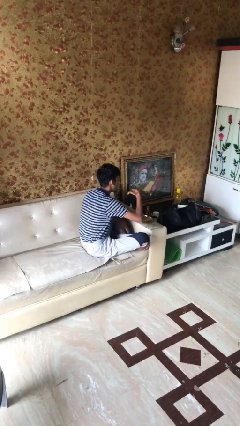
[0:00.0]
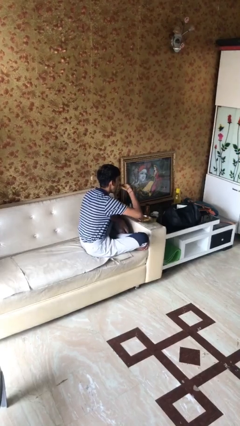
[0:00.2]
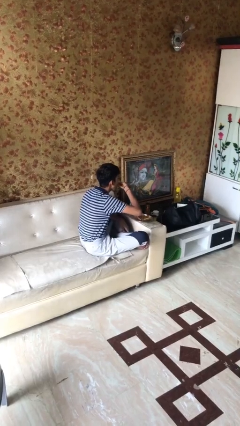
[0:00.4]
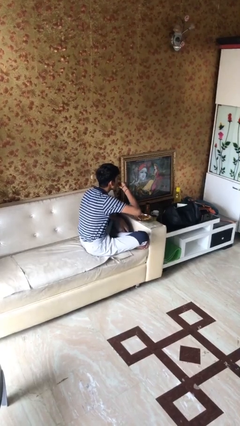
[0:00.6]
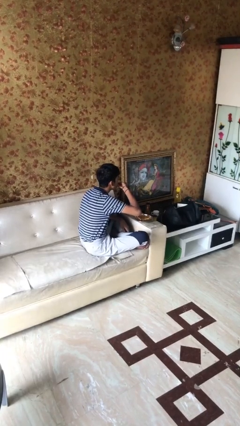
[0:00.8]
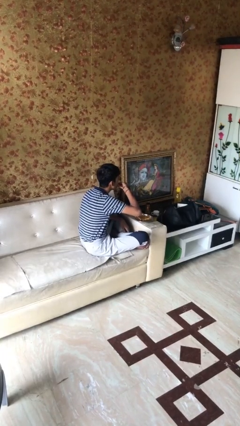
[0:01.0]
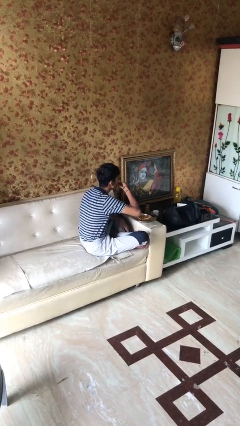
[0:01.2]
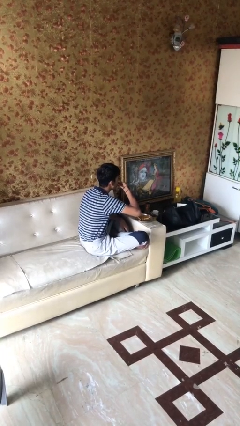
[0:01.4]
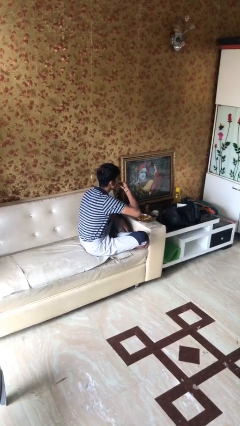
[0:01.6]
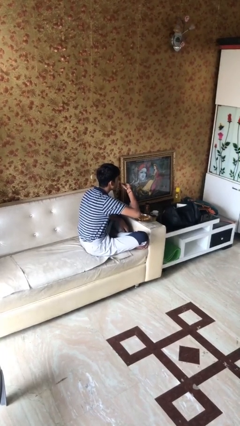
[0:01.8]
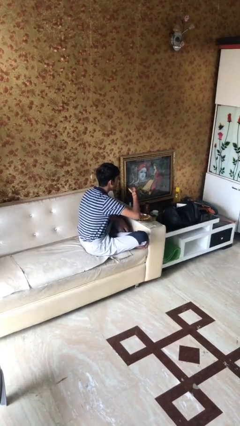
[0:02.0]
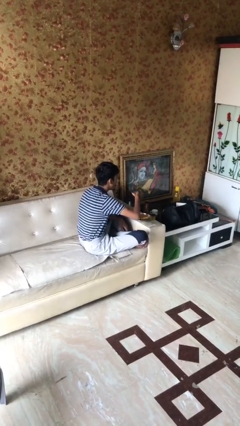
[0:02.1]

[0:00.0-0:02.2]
person eats with hands

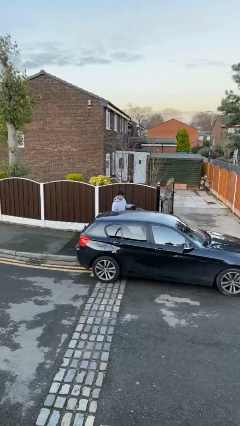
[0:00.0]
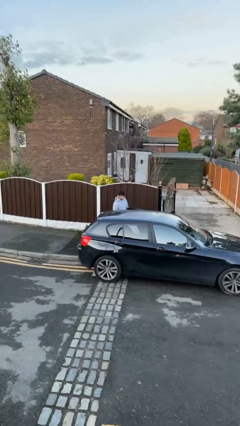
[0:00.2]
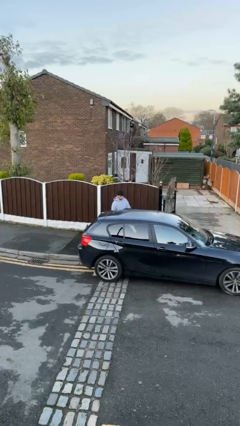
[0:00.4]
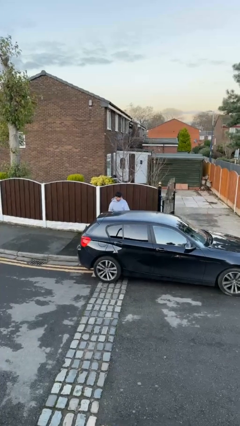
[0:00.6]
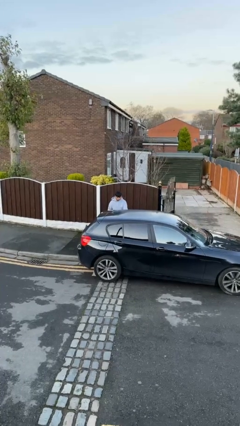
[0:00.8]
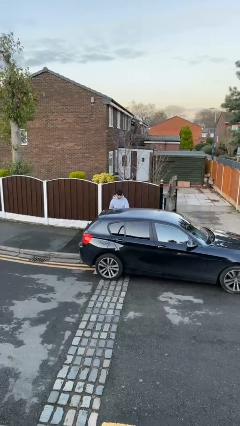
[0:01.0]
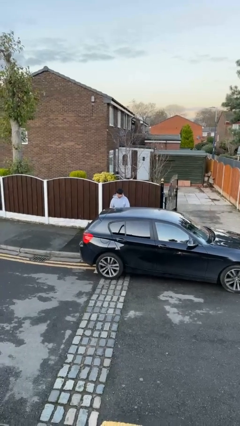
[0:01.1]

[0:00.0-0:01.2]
person closes car door

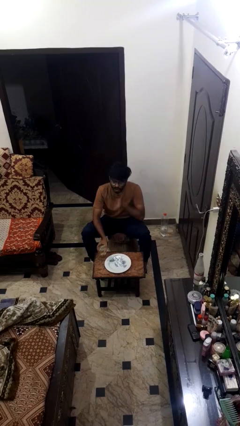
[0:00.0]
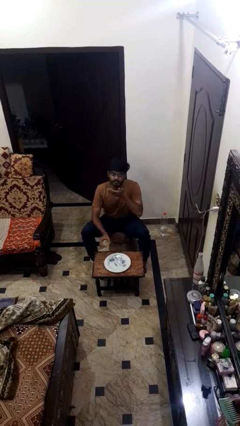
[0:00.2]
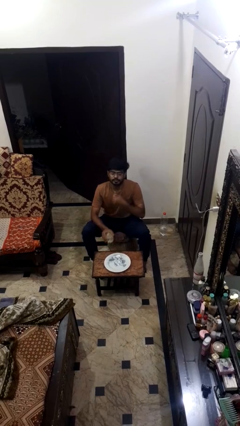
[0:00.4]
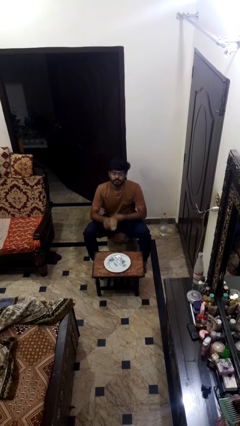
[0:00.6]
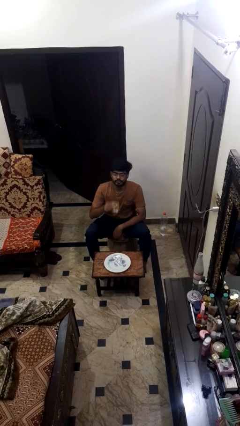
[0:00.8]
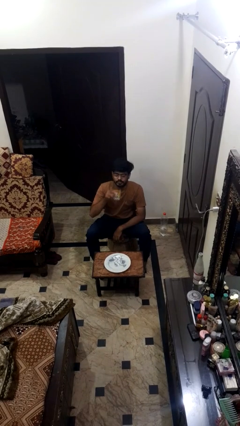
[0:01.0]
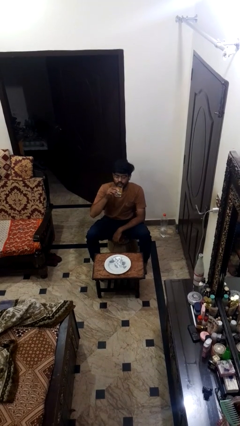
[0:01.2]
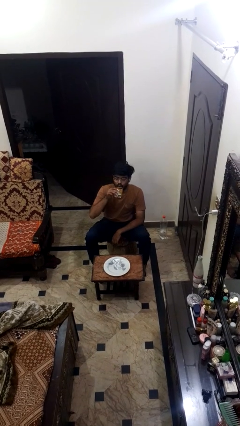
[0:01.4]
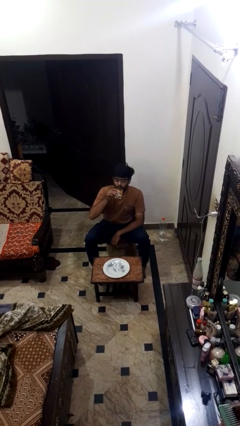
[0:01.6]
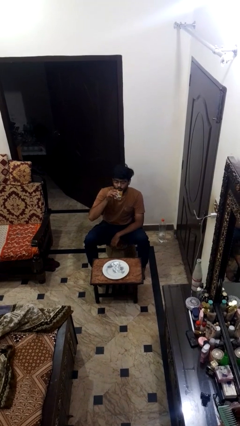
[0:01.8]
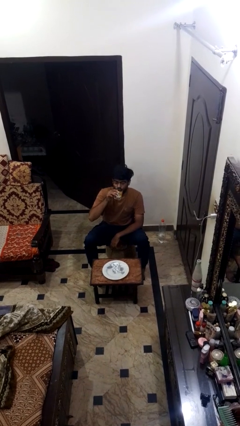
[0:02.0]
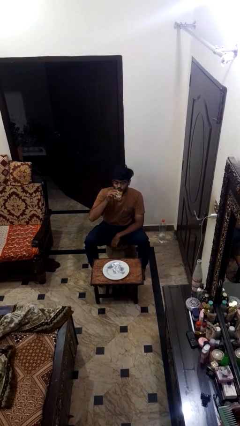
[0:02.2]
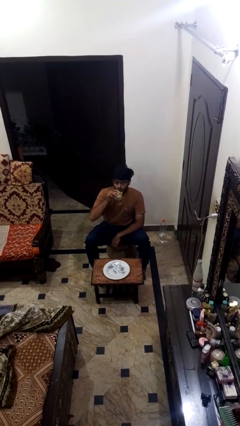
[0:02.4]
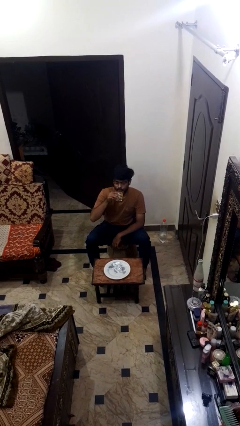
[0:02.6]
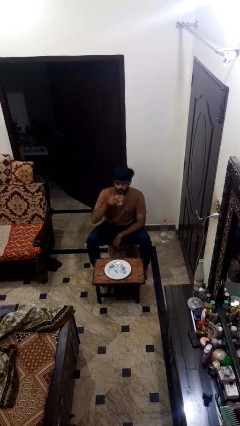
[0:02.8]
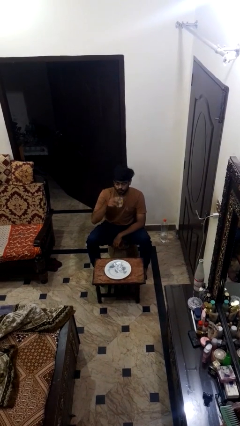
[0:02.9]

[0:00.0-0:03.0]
person drinks from cup

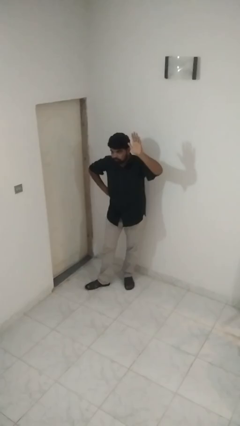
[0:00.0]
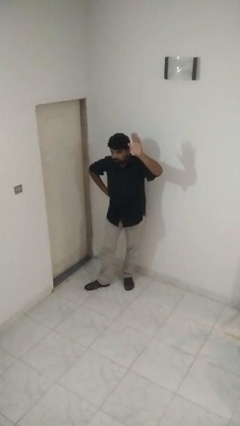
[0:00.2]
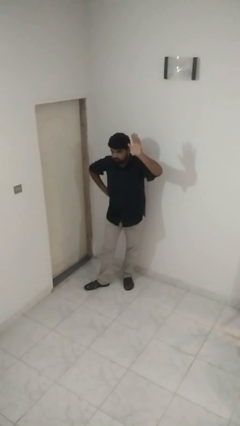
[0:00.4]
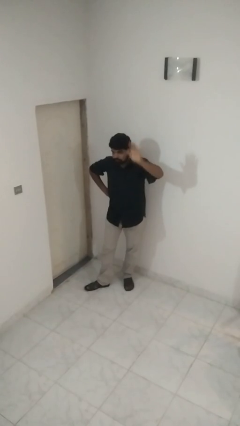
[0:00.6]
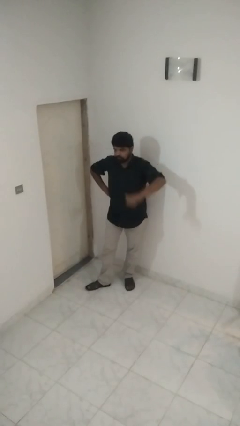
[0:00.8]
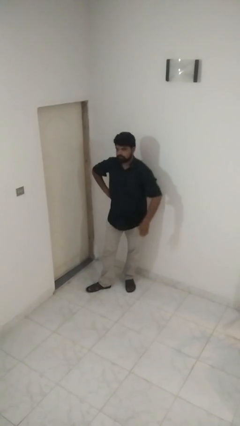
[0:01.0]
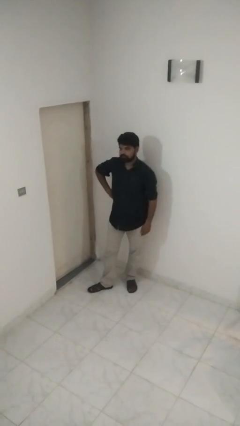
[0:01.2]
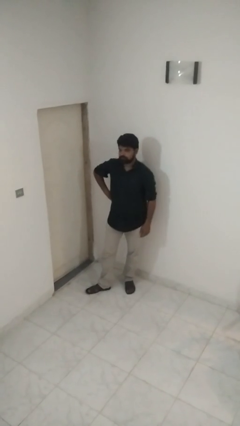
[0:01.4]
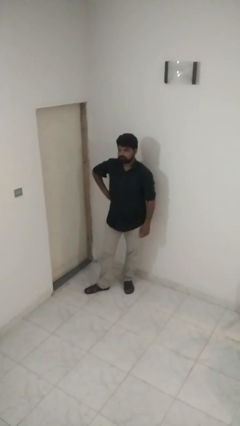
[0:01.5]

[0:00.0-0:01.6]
person gestures lower hand

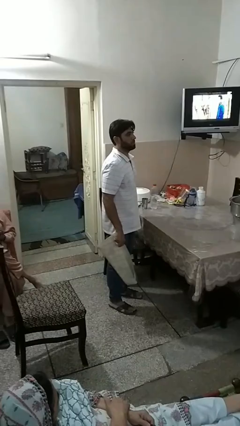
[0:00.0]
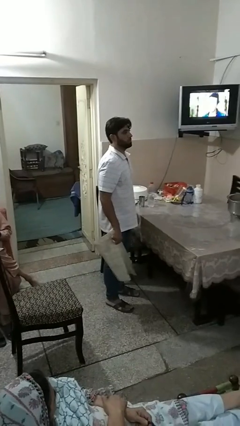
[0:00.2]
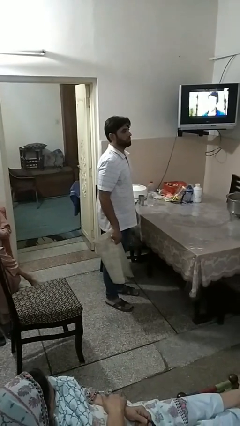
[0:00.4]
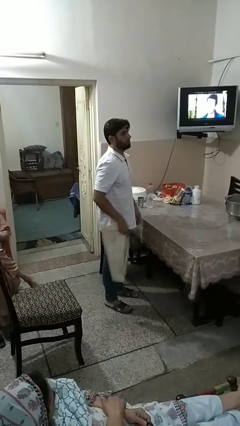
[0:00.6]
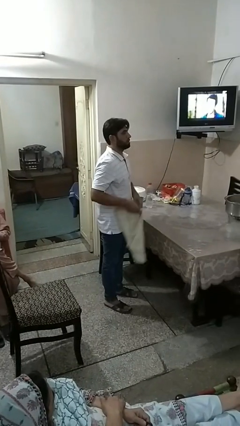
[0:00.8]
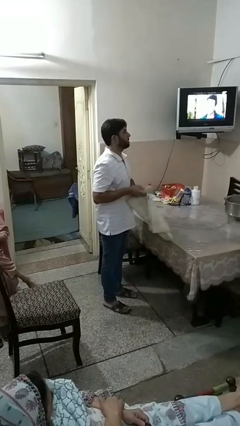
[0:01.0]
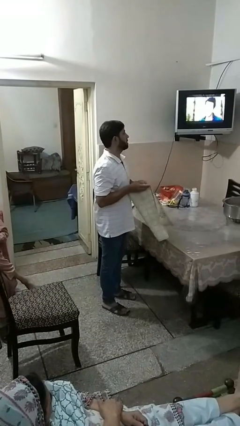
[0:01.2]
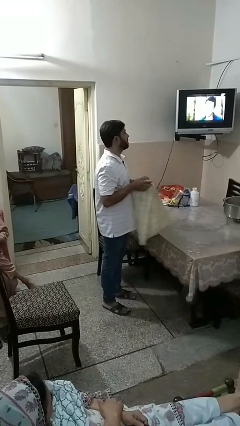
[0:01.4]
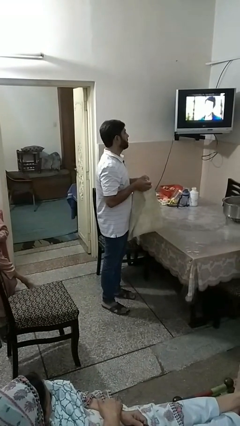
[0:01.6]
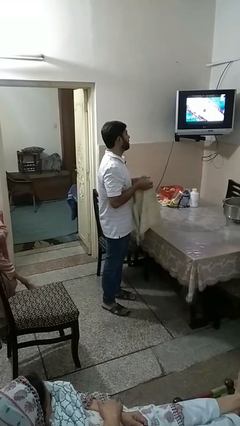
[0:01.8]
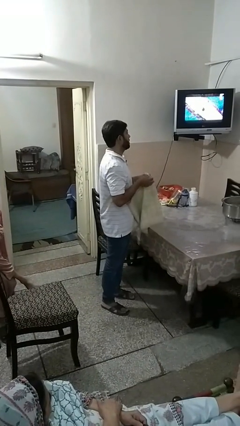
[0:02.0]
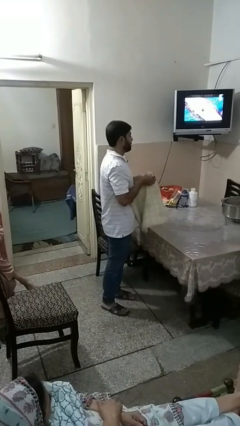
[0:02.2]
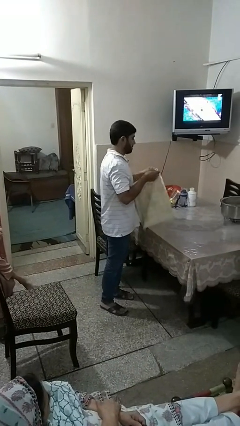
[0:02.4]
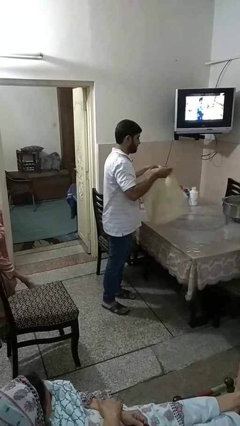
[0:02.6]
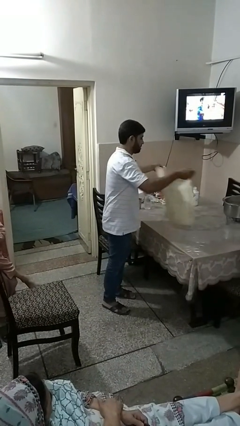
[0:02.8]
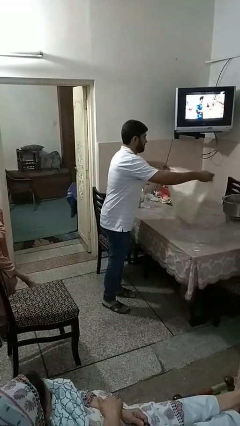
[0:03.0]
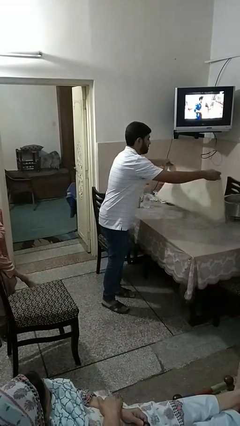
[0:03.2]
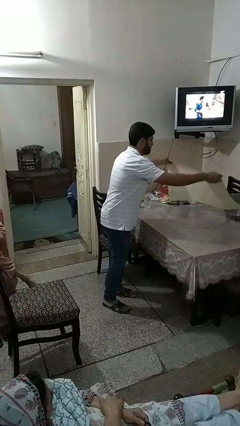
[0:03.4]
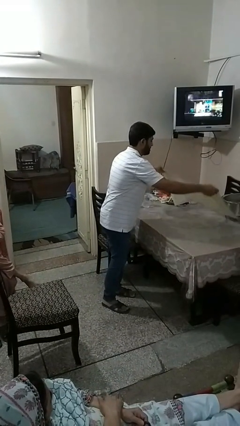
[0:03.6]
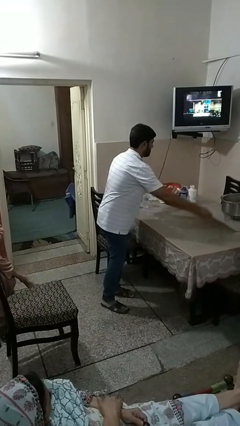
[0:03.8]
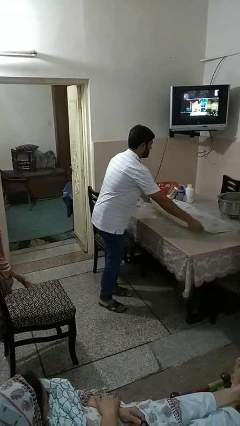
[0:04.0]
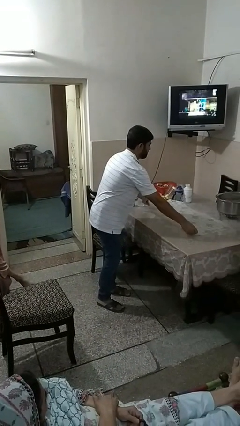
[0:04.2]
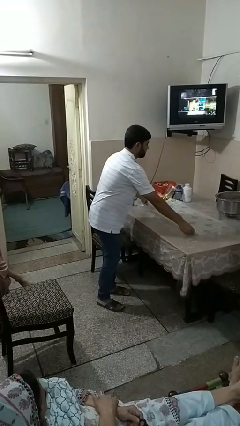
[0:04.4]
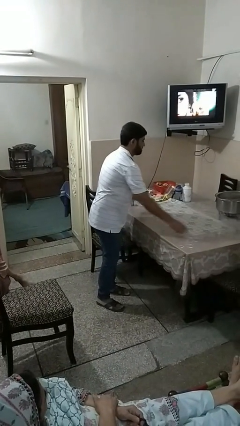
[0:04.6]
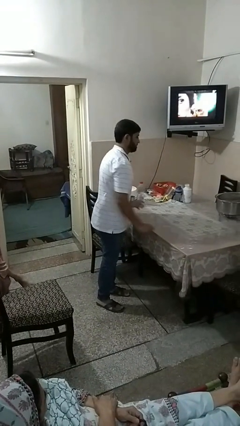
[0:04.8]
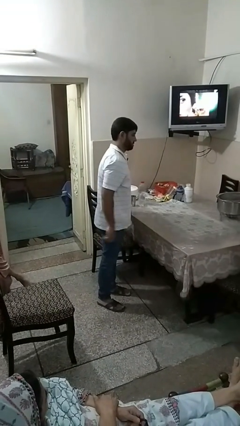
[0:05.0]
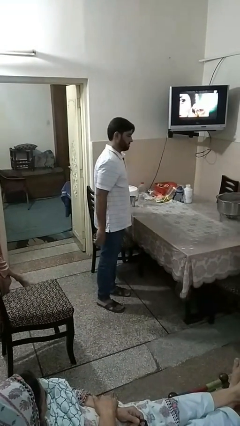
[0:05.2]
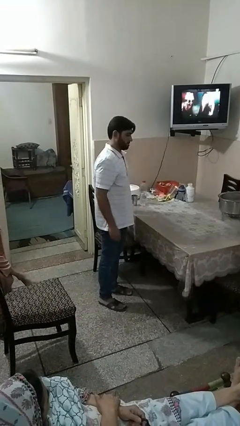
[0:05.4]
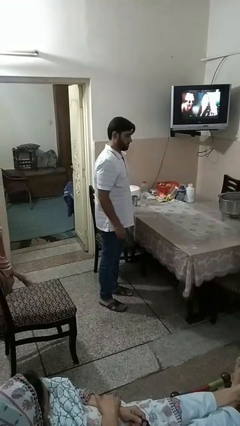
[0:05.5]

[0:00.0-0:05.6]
person spreads tablecloth

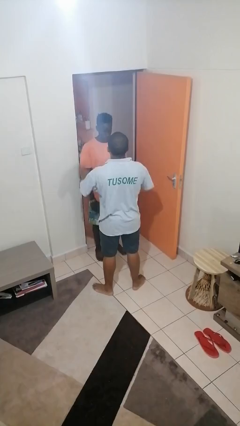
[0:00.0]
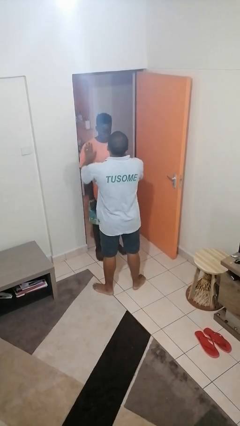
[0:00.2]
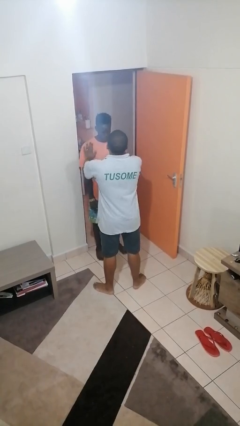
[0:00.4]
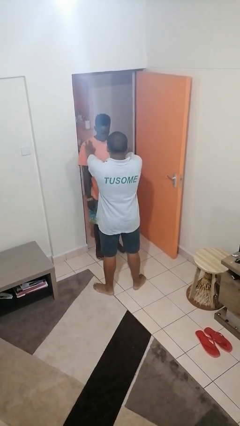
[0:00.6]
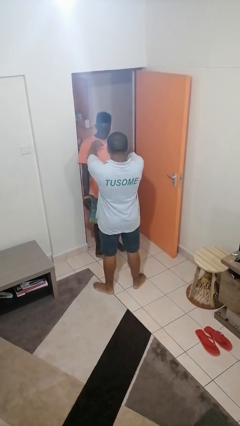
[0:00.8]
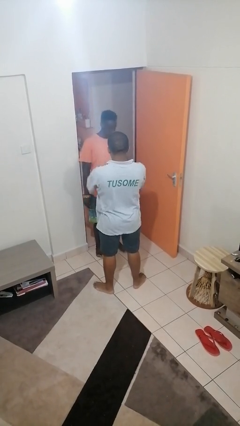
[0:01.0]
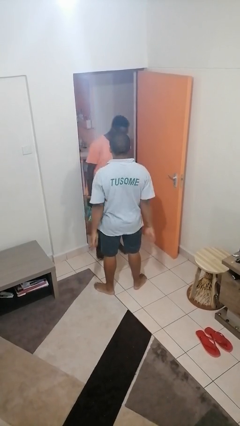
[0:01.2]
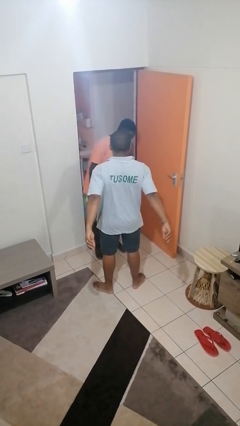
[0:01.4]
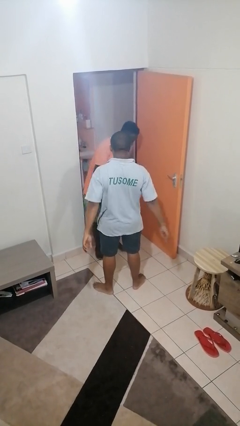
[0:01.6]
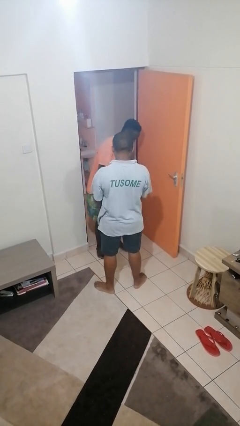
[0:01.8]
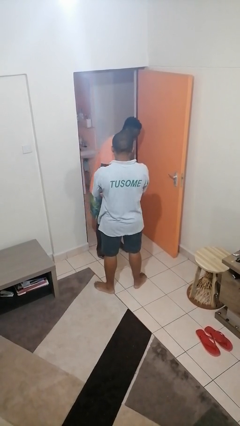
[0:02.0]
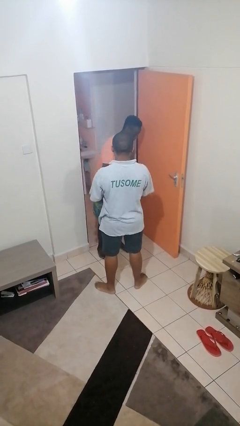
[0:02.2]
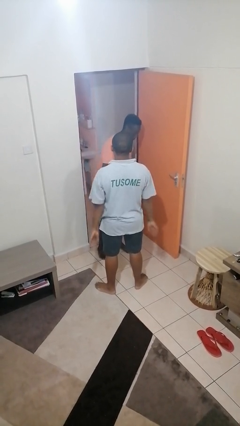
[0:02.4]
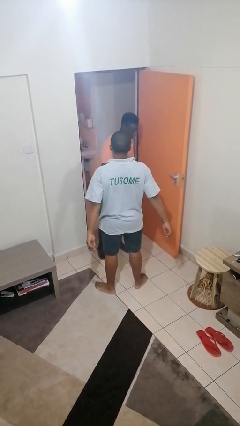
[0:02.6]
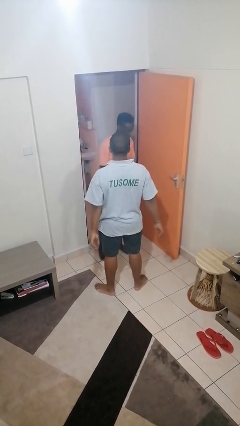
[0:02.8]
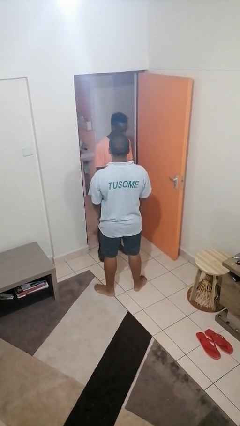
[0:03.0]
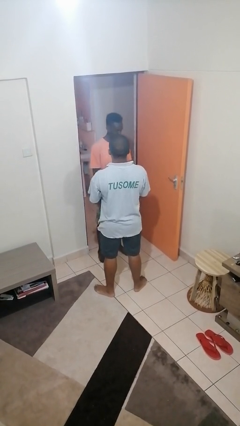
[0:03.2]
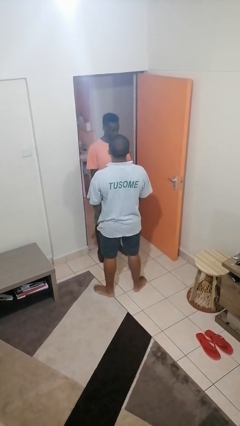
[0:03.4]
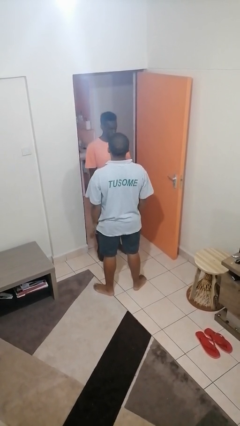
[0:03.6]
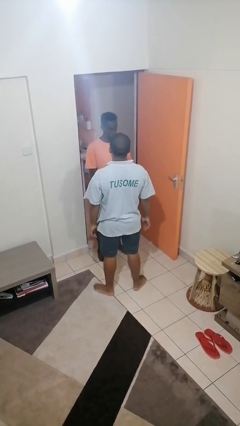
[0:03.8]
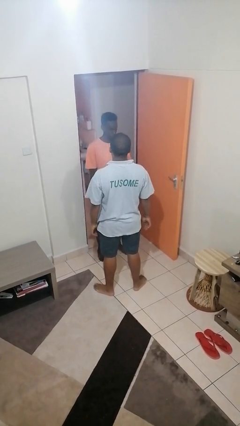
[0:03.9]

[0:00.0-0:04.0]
person shoves person
